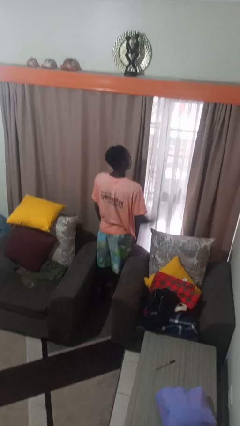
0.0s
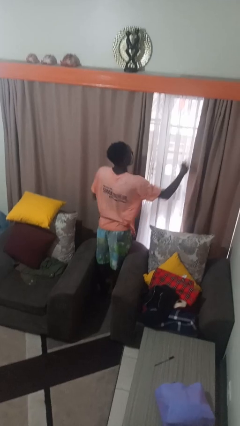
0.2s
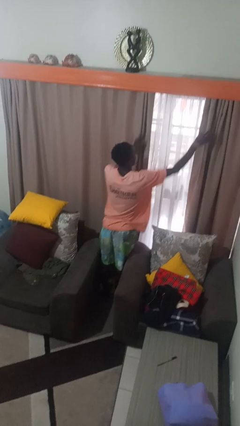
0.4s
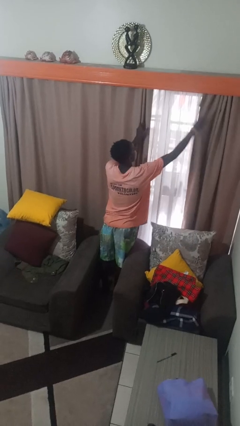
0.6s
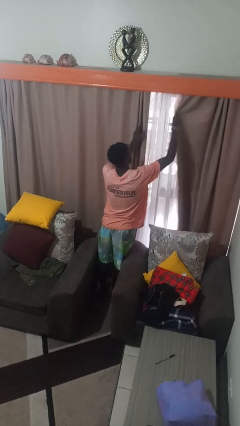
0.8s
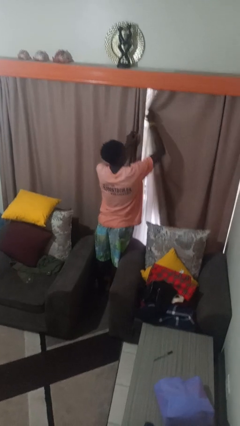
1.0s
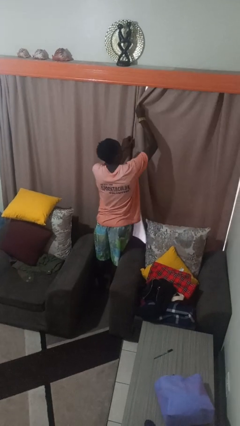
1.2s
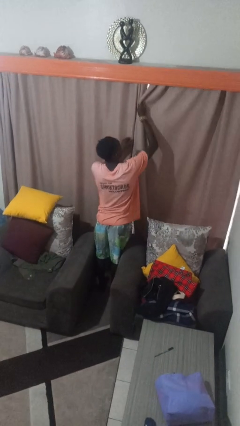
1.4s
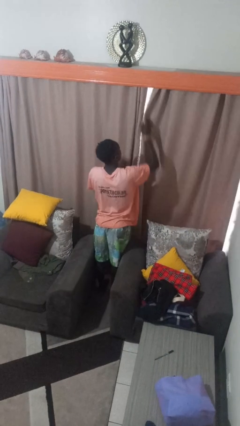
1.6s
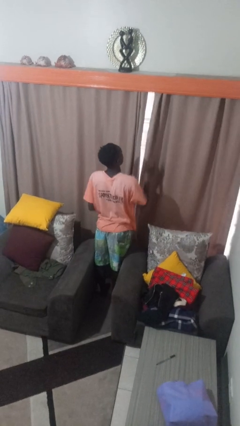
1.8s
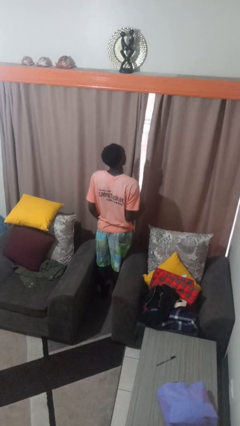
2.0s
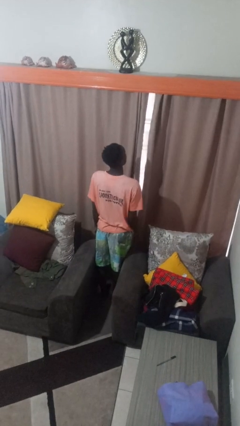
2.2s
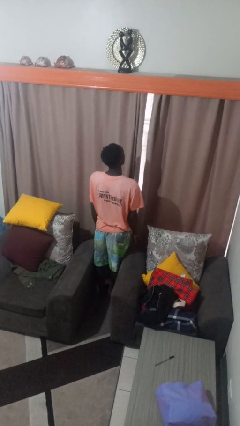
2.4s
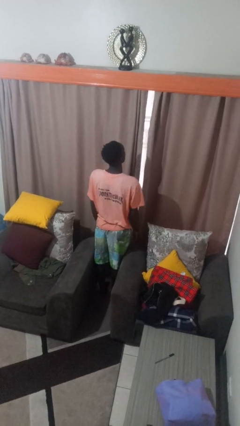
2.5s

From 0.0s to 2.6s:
person closes curtains

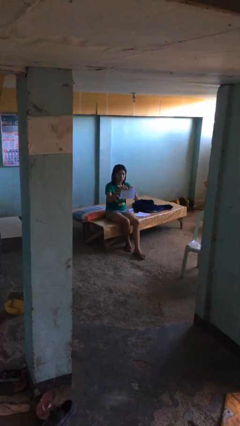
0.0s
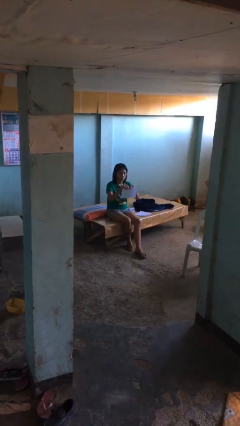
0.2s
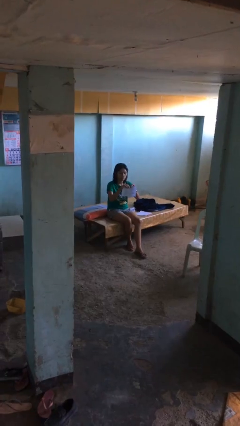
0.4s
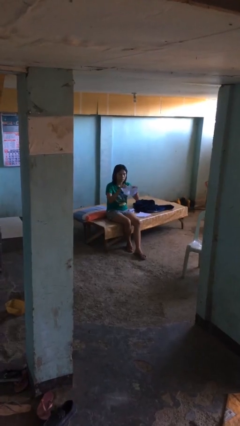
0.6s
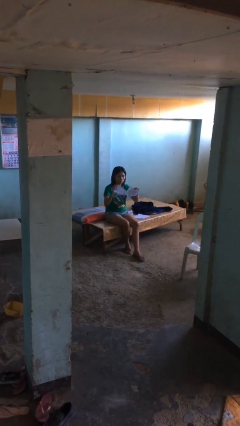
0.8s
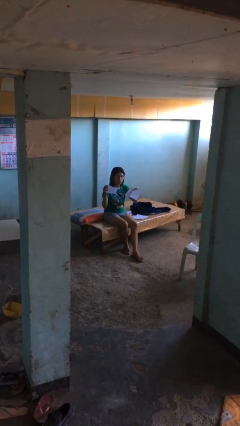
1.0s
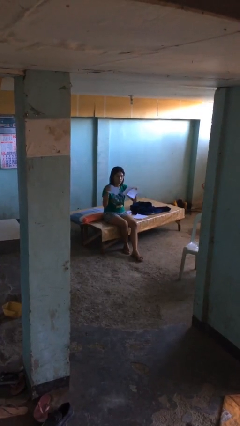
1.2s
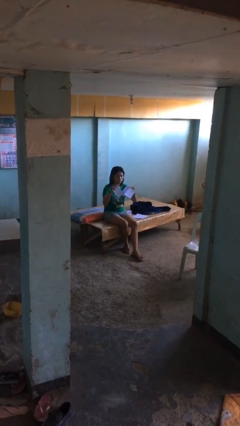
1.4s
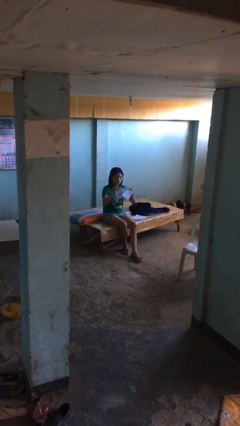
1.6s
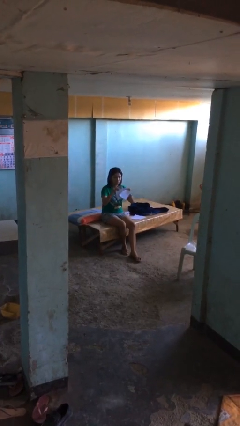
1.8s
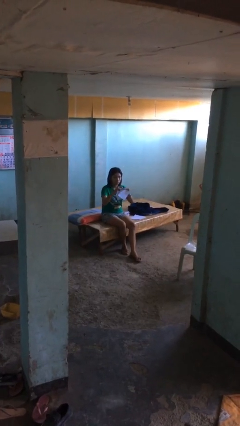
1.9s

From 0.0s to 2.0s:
person tears paper

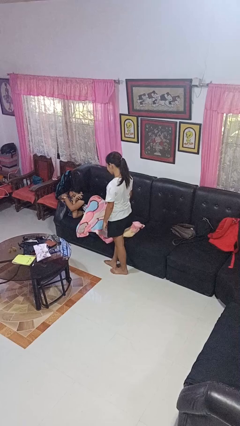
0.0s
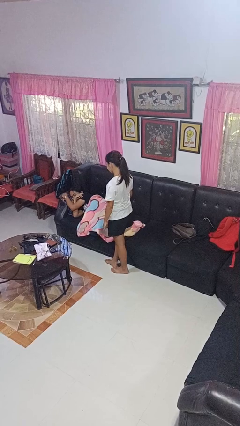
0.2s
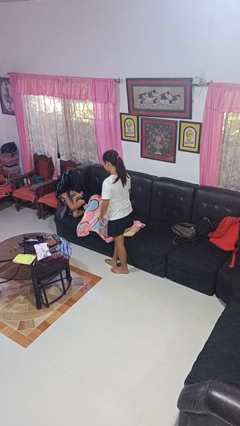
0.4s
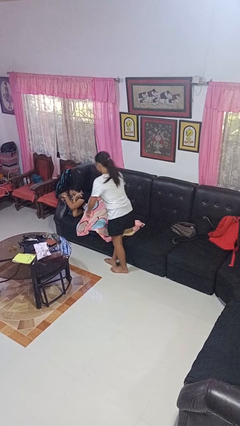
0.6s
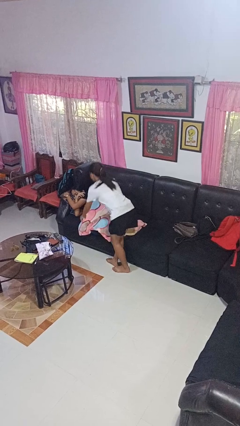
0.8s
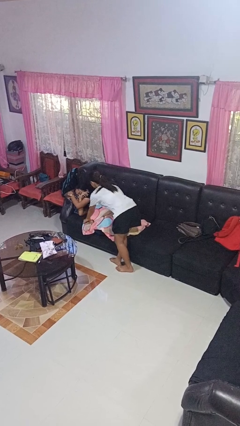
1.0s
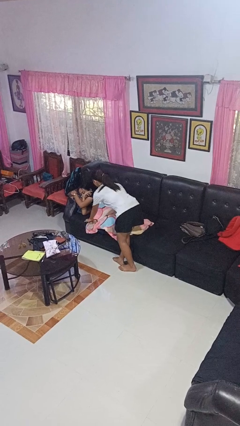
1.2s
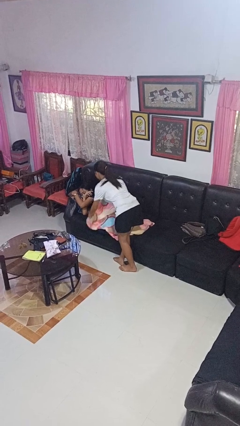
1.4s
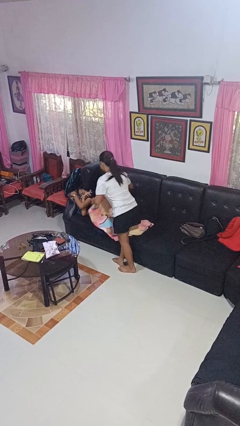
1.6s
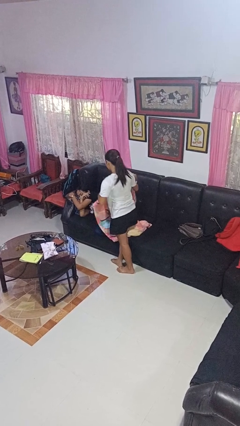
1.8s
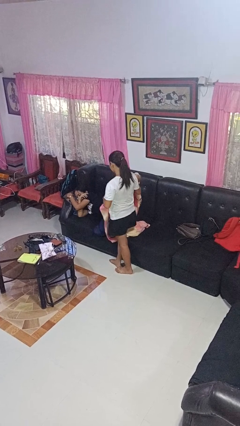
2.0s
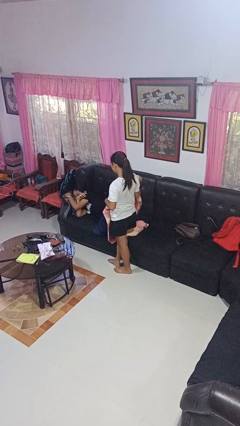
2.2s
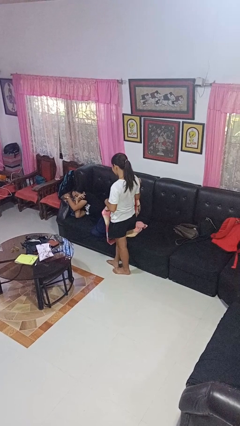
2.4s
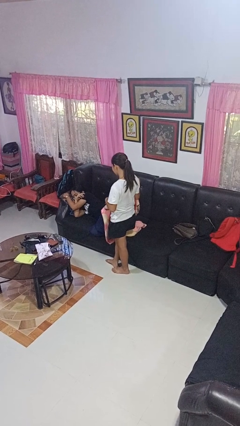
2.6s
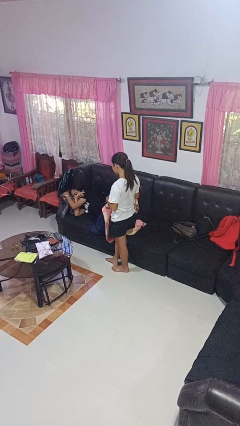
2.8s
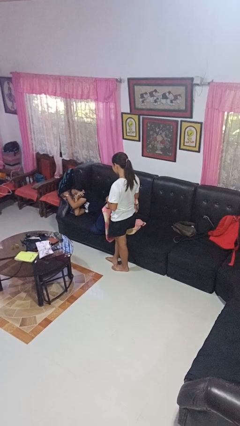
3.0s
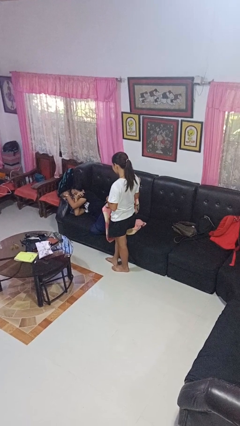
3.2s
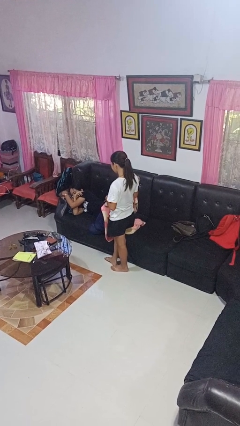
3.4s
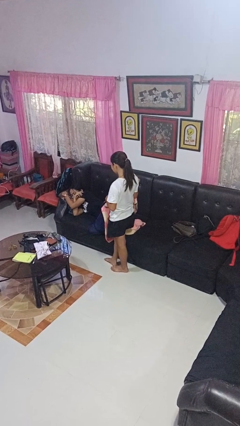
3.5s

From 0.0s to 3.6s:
person uncovers friend with blanket

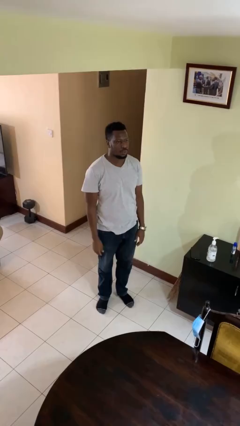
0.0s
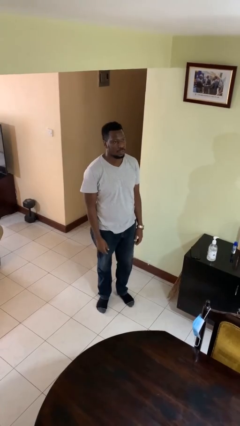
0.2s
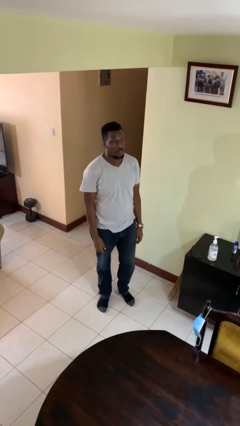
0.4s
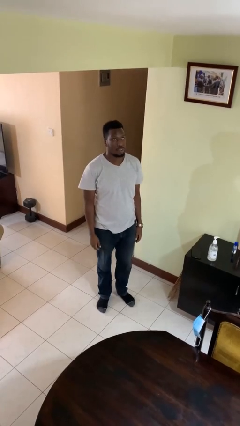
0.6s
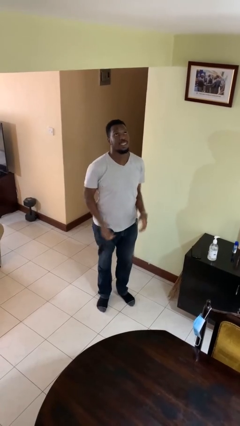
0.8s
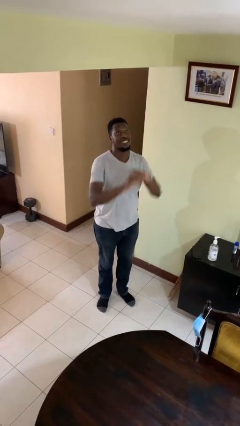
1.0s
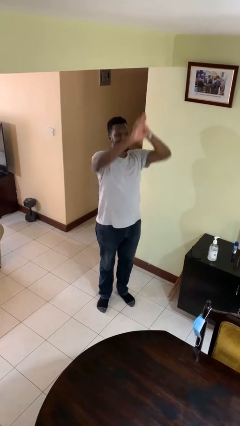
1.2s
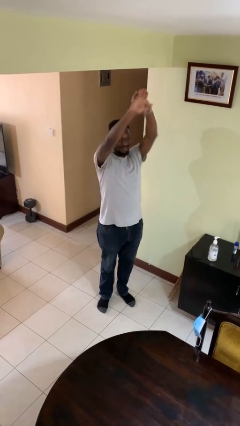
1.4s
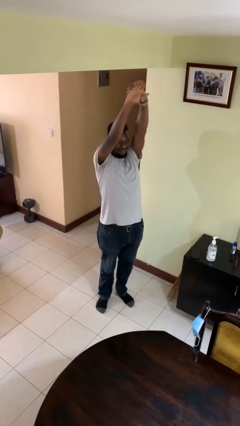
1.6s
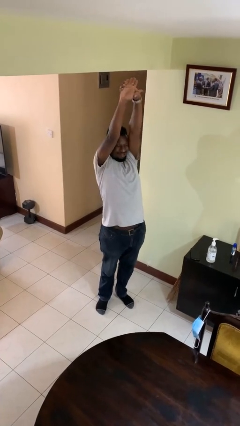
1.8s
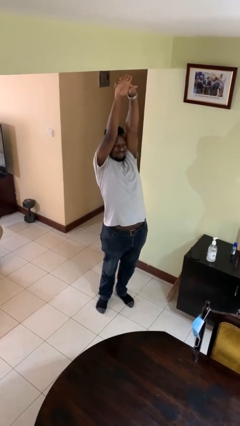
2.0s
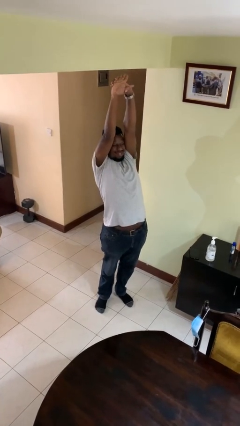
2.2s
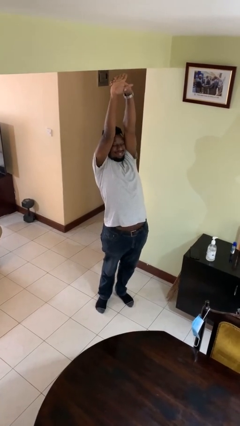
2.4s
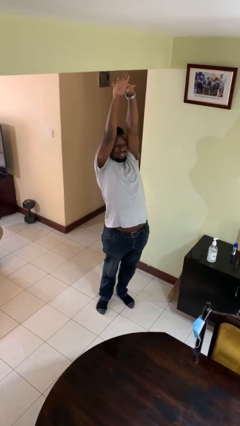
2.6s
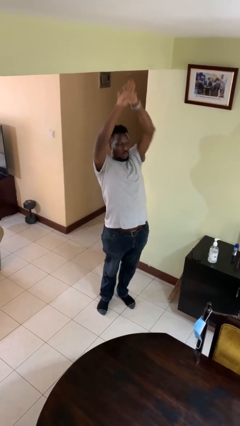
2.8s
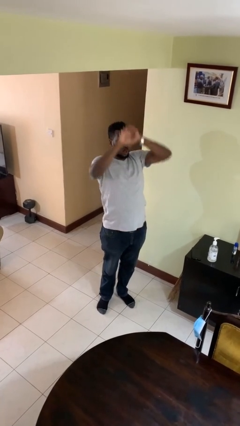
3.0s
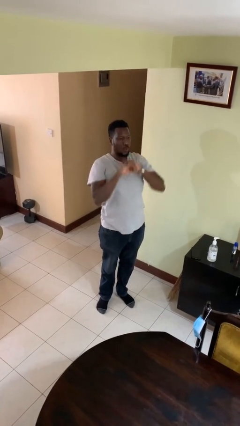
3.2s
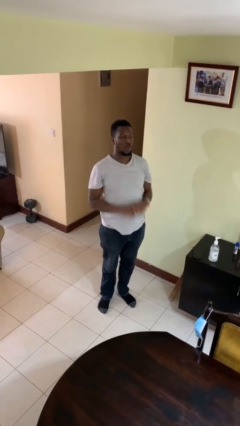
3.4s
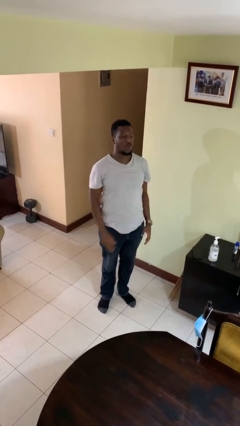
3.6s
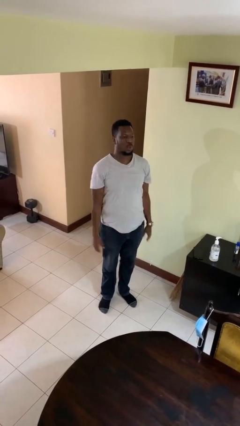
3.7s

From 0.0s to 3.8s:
person stretches arms over head

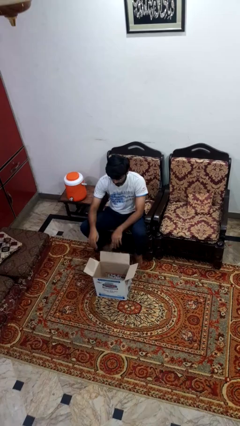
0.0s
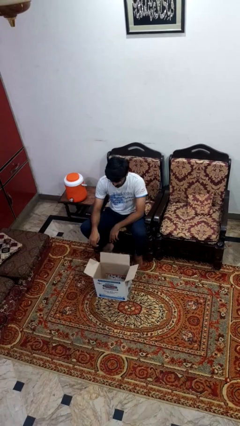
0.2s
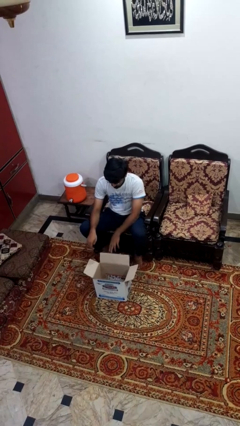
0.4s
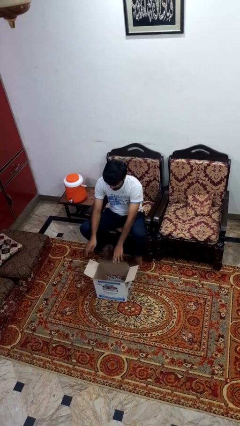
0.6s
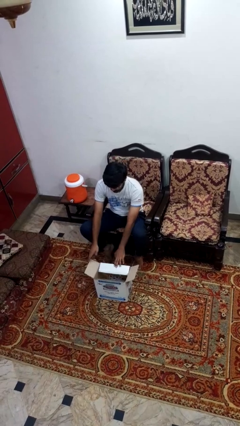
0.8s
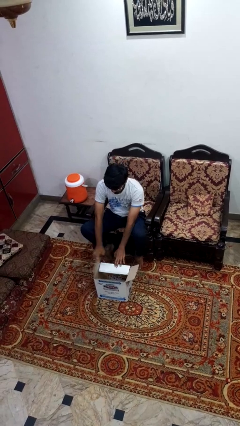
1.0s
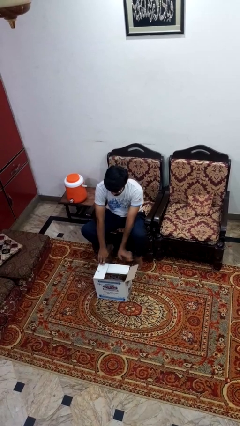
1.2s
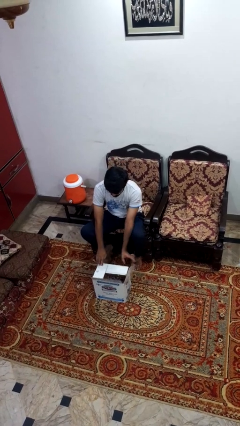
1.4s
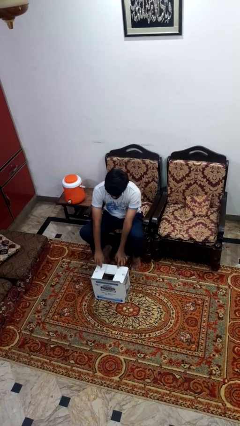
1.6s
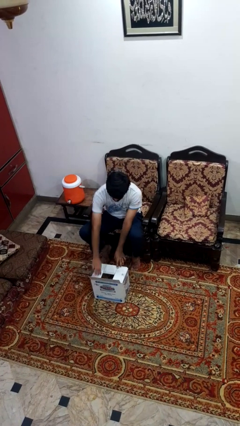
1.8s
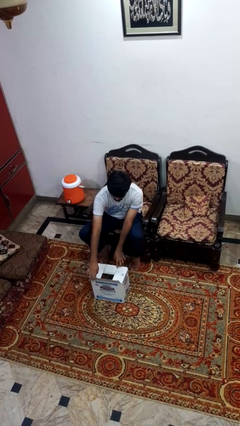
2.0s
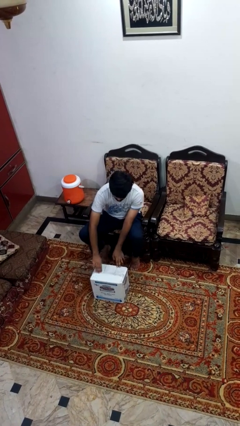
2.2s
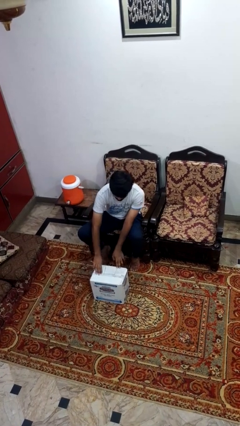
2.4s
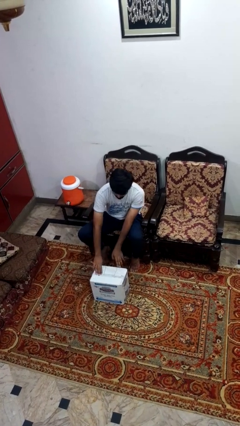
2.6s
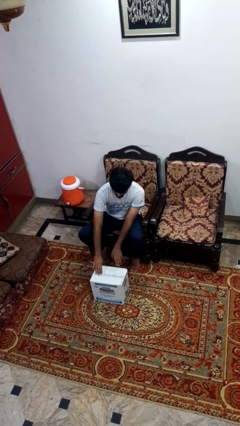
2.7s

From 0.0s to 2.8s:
person closes box

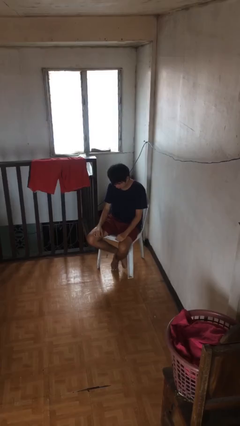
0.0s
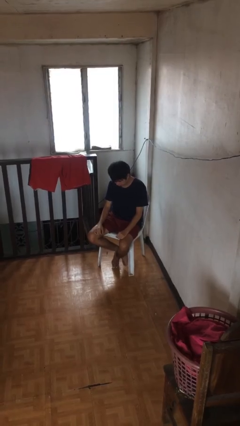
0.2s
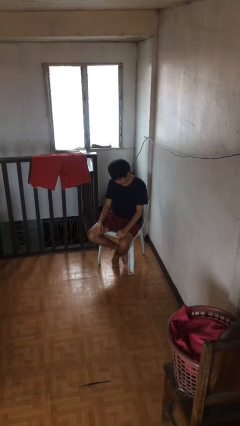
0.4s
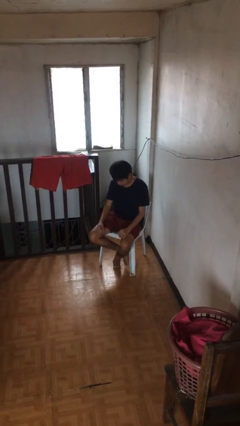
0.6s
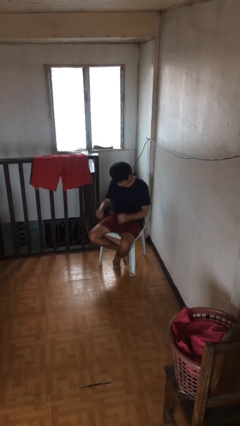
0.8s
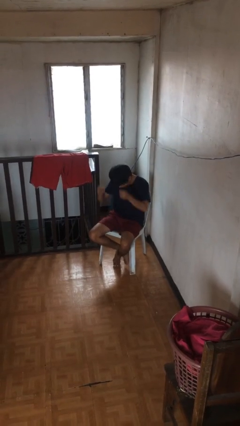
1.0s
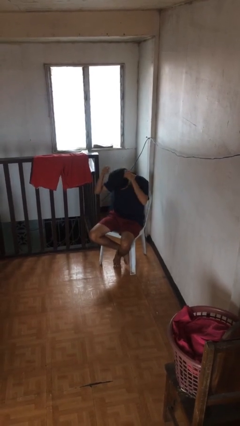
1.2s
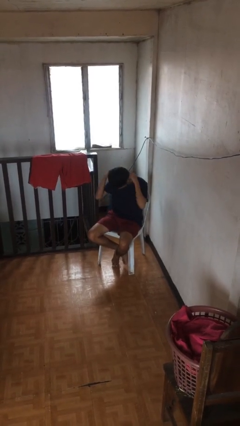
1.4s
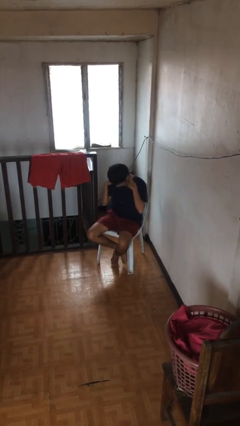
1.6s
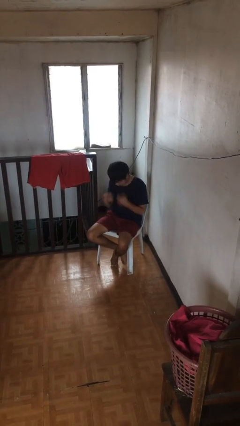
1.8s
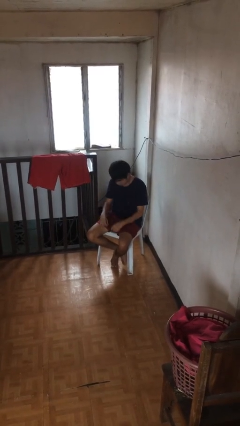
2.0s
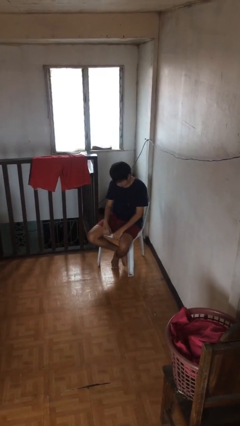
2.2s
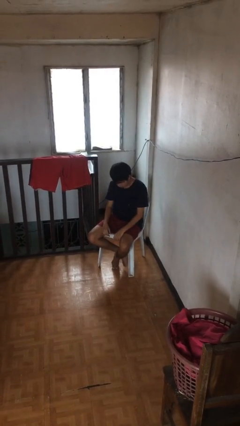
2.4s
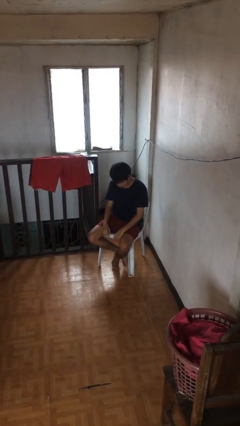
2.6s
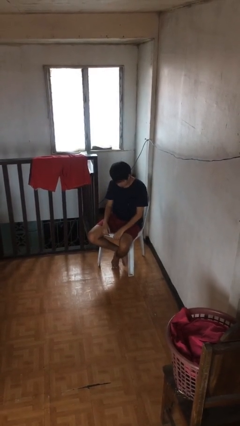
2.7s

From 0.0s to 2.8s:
person puts on necklace
